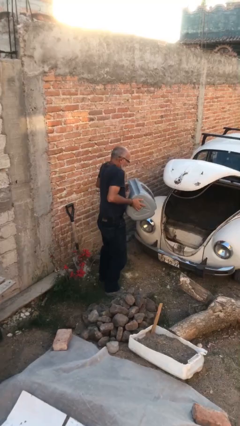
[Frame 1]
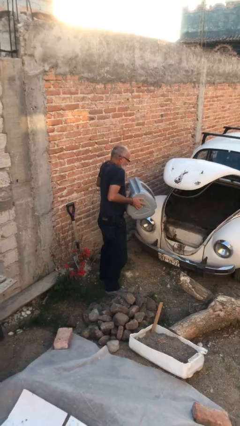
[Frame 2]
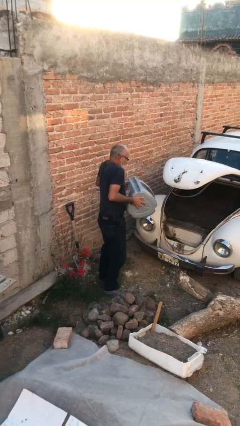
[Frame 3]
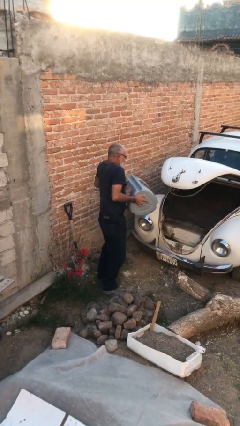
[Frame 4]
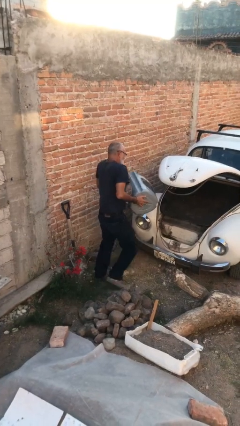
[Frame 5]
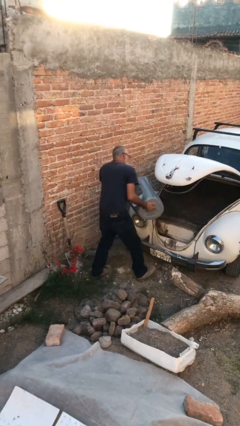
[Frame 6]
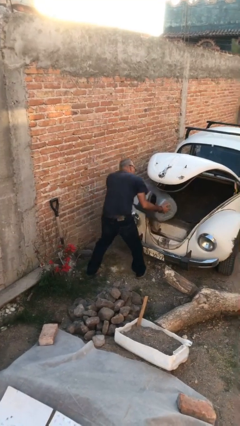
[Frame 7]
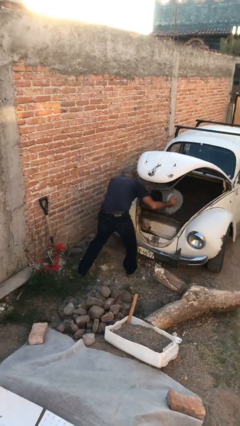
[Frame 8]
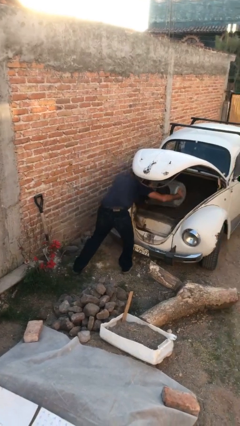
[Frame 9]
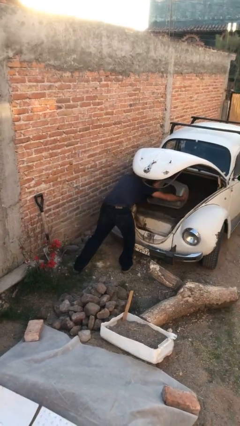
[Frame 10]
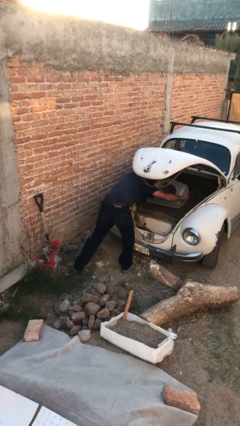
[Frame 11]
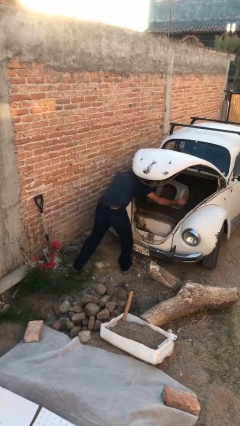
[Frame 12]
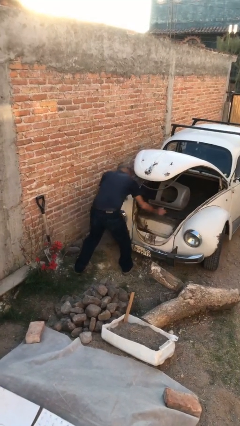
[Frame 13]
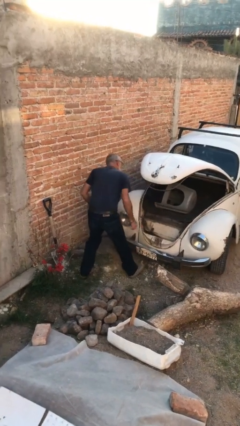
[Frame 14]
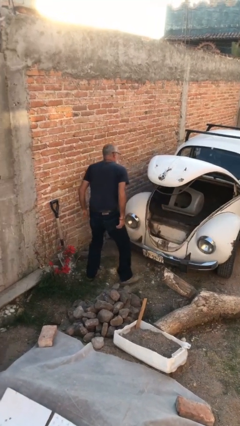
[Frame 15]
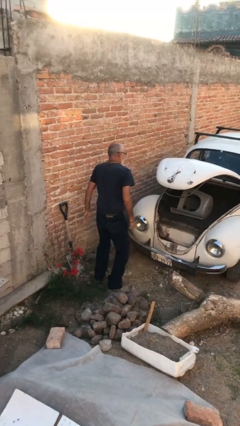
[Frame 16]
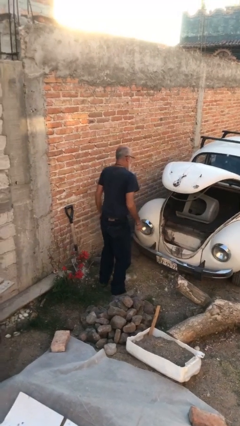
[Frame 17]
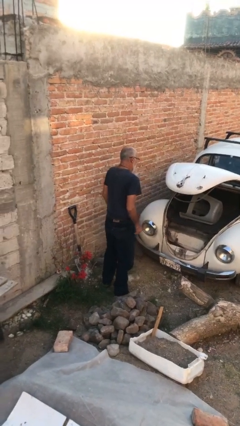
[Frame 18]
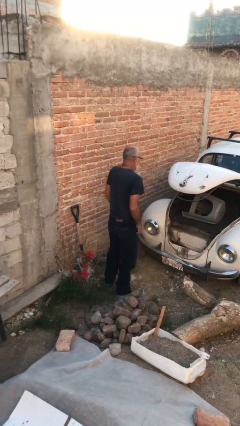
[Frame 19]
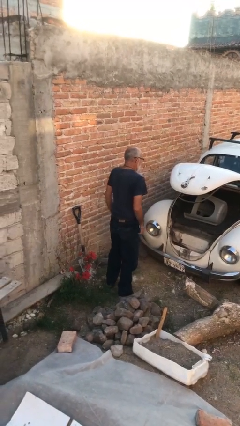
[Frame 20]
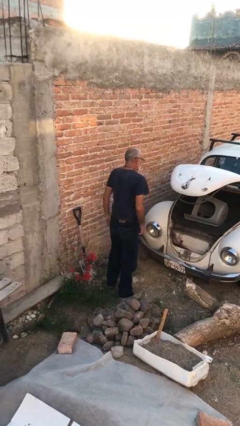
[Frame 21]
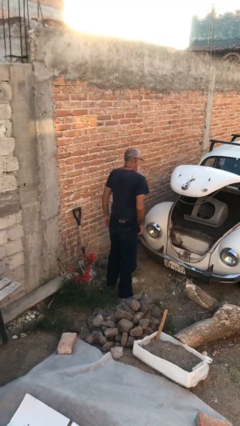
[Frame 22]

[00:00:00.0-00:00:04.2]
person loads car

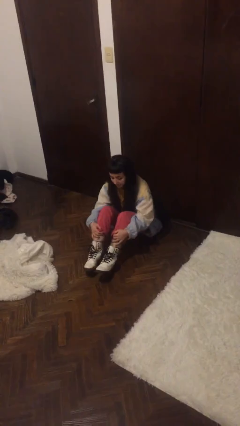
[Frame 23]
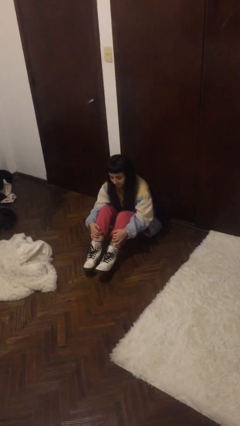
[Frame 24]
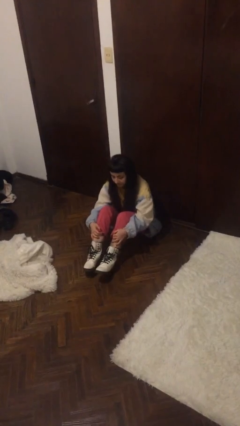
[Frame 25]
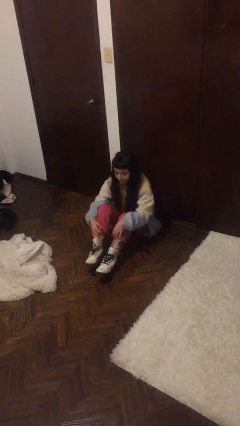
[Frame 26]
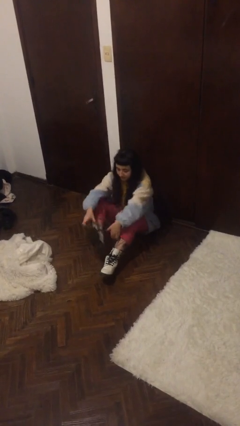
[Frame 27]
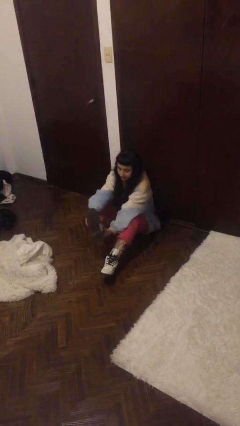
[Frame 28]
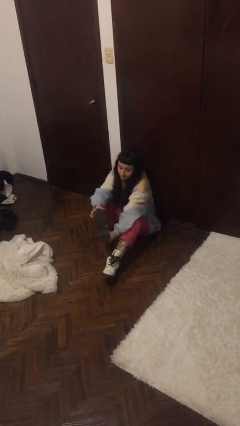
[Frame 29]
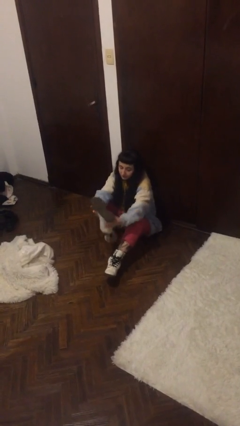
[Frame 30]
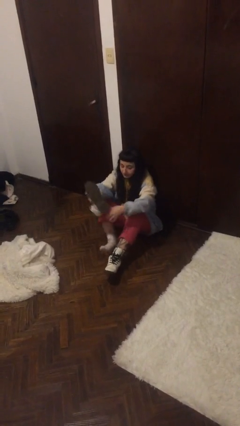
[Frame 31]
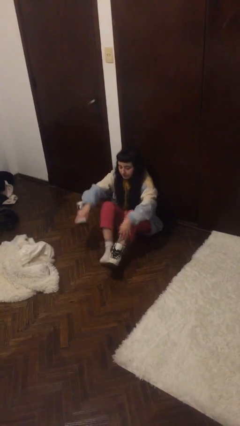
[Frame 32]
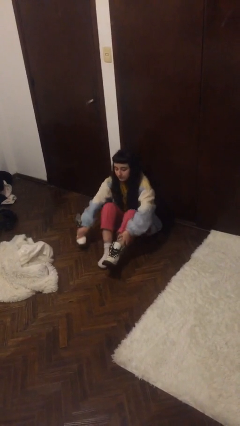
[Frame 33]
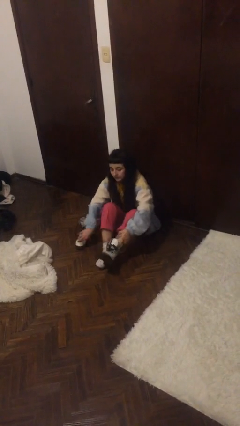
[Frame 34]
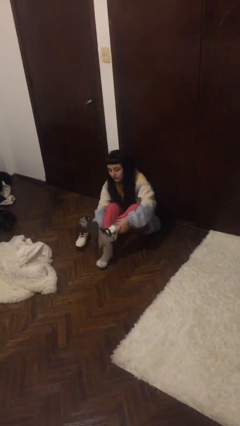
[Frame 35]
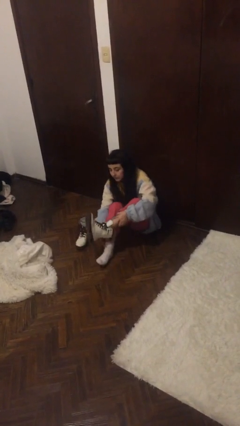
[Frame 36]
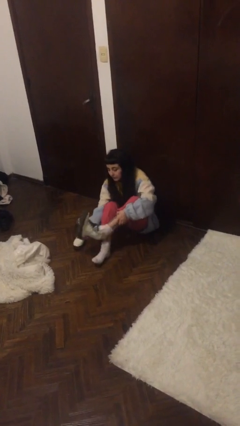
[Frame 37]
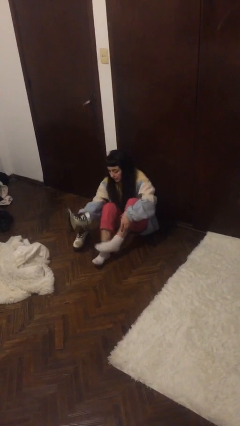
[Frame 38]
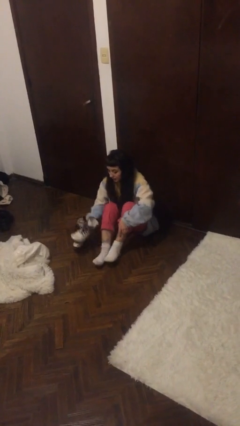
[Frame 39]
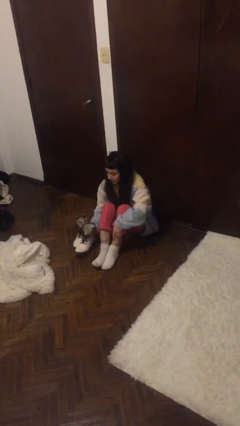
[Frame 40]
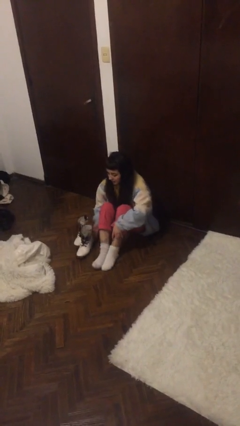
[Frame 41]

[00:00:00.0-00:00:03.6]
person takes off boots

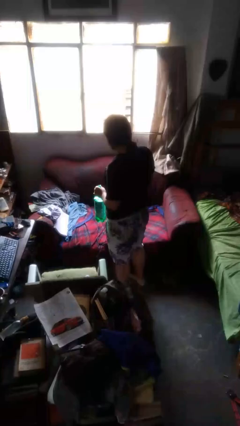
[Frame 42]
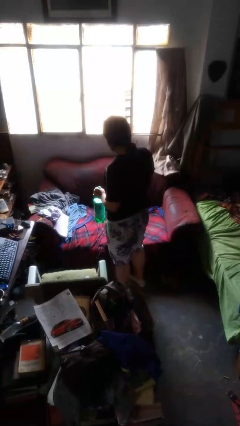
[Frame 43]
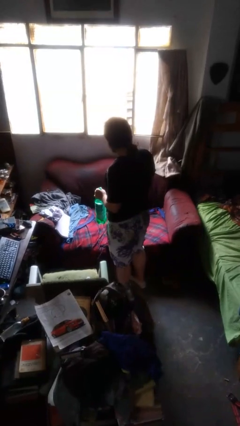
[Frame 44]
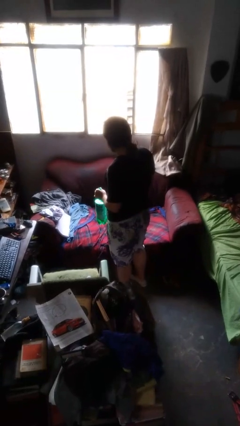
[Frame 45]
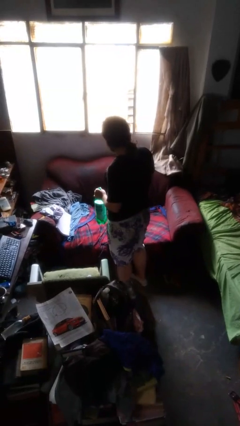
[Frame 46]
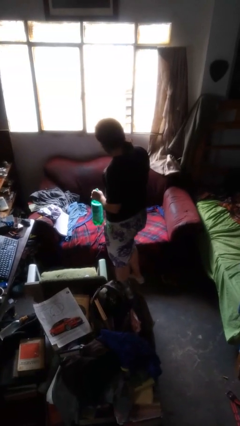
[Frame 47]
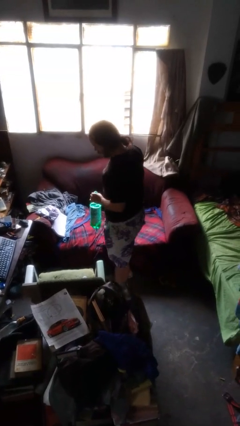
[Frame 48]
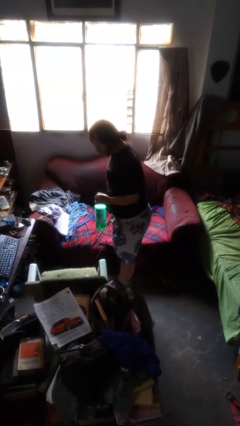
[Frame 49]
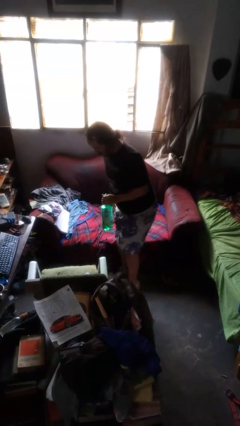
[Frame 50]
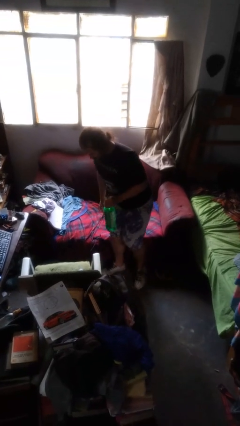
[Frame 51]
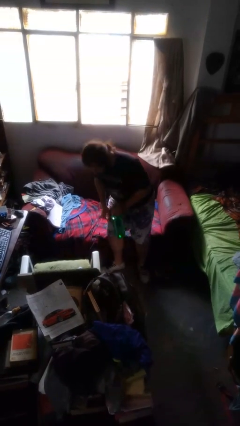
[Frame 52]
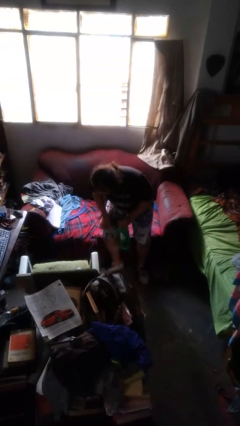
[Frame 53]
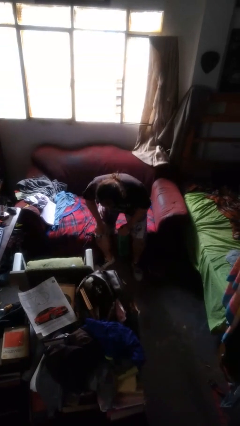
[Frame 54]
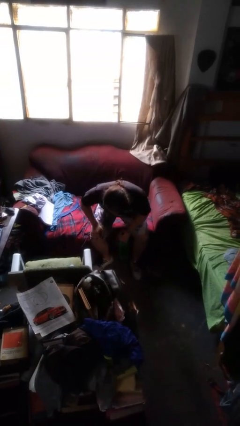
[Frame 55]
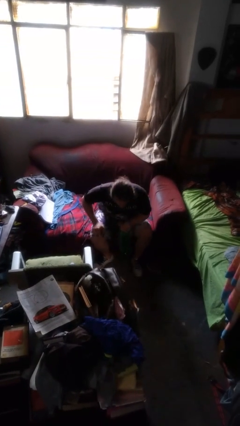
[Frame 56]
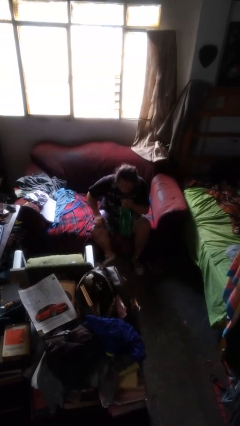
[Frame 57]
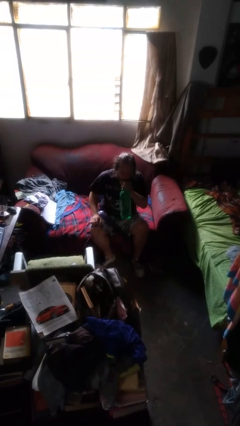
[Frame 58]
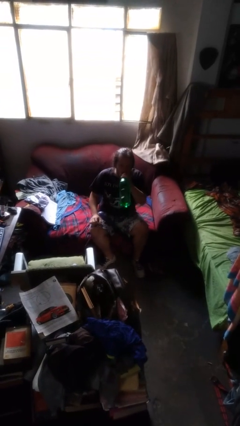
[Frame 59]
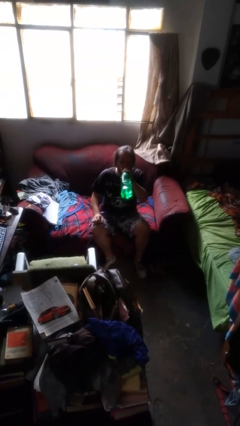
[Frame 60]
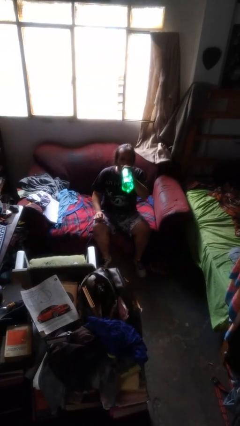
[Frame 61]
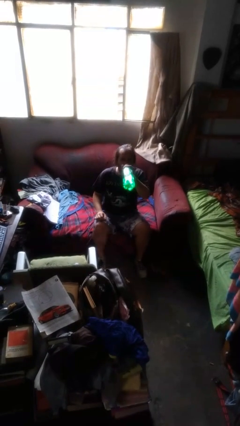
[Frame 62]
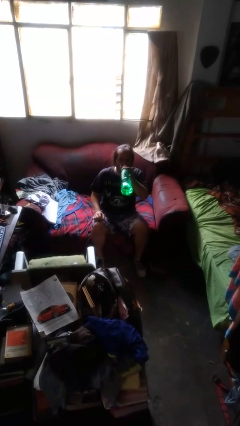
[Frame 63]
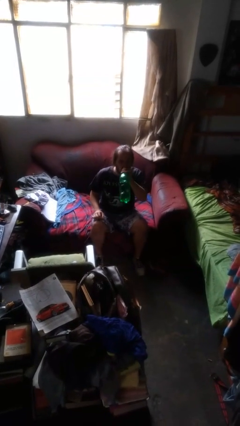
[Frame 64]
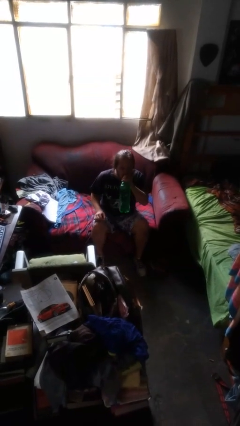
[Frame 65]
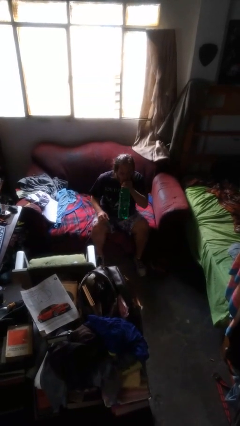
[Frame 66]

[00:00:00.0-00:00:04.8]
person drinks from bottle

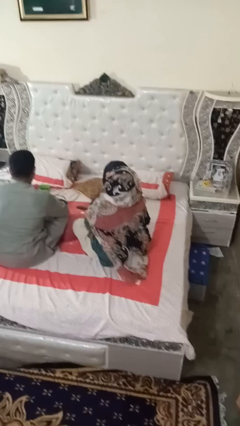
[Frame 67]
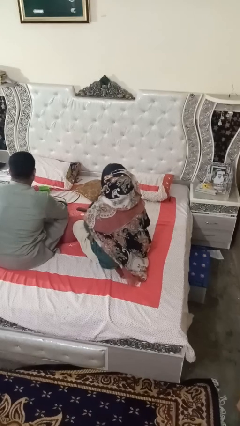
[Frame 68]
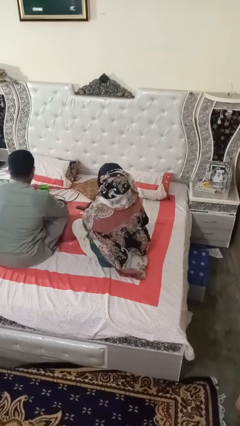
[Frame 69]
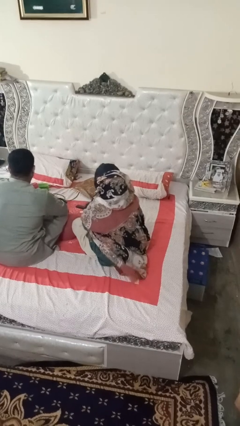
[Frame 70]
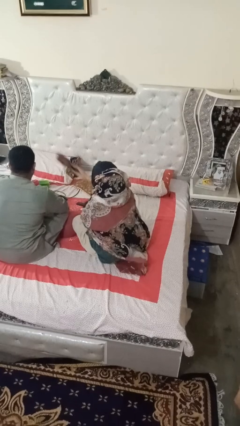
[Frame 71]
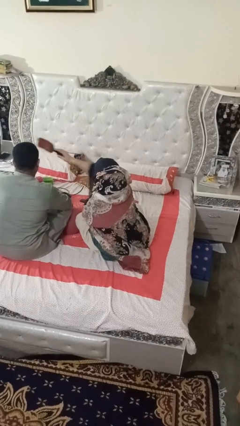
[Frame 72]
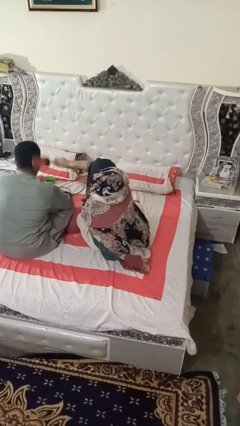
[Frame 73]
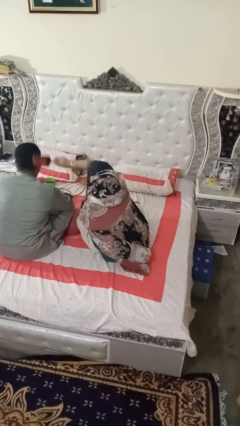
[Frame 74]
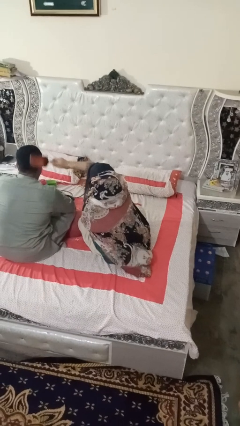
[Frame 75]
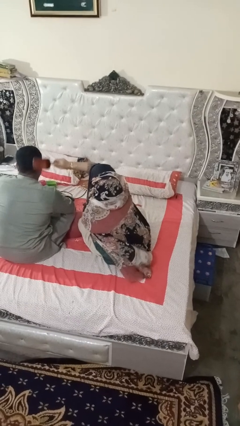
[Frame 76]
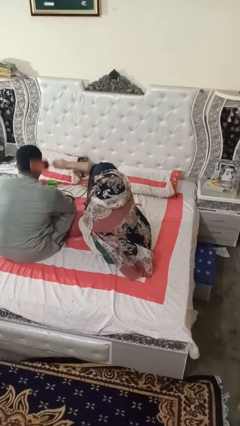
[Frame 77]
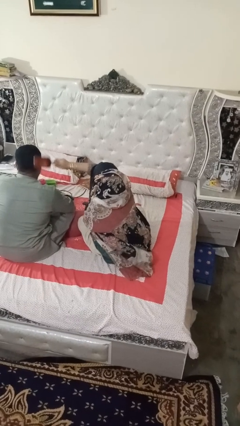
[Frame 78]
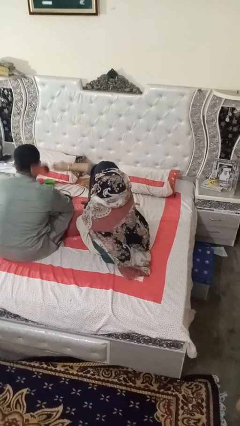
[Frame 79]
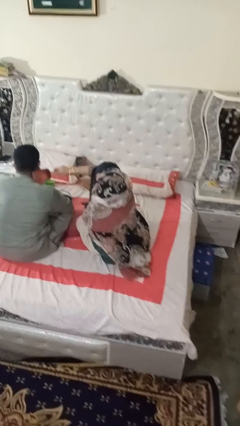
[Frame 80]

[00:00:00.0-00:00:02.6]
person brushes hair of person

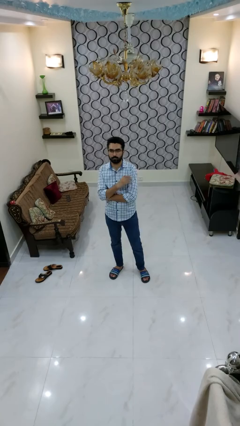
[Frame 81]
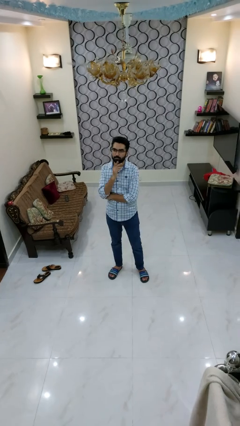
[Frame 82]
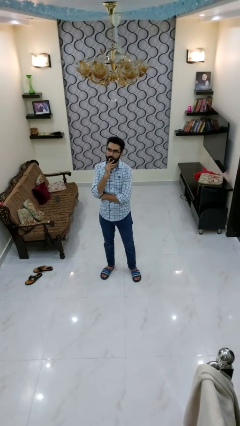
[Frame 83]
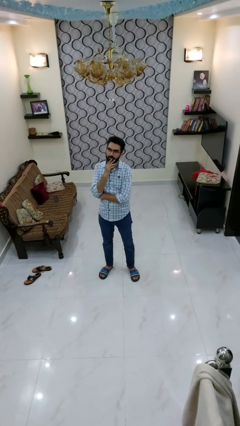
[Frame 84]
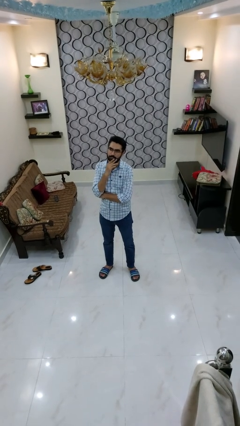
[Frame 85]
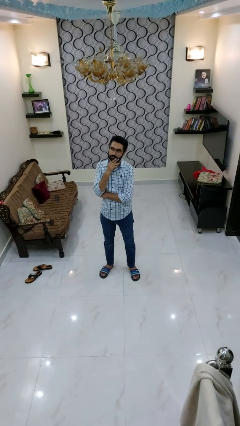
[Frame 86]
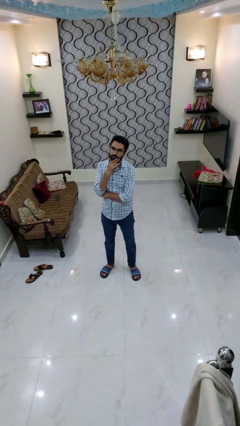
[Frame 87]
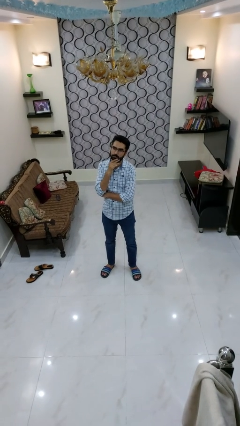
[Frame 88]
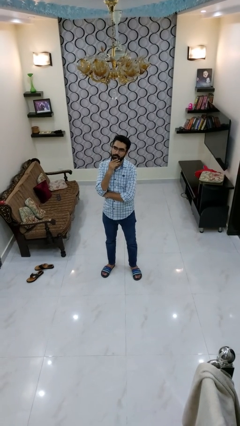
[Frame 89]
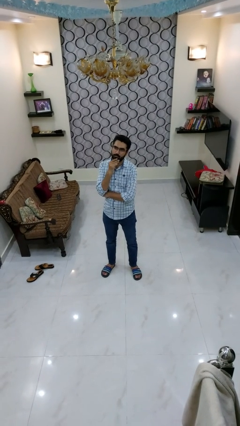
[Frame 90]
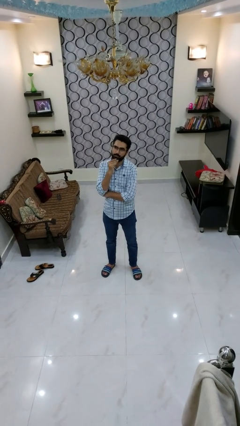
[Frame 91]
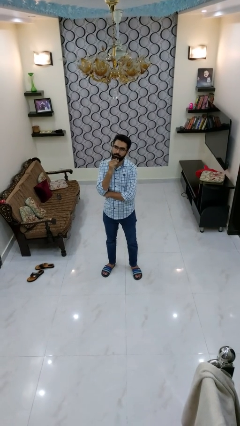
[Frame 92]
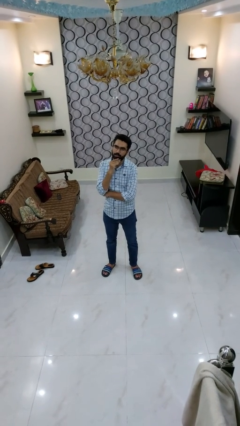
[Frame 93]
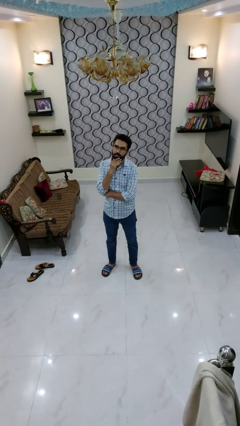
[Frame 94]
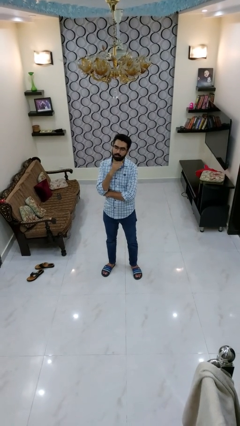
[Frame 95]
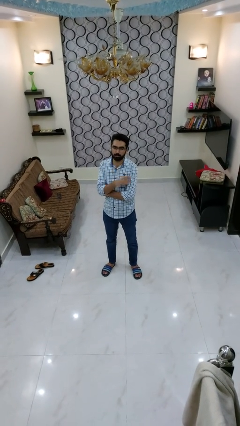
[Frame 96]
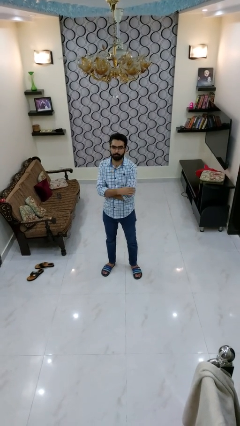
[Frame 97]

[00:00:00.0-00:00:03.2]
person strokes chin
